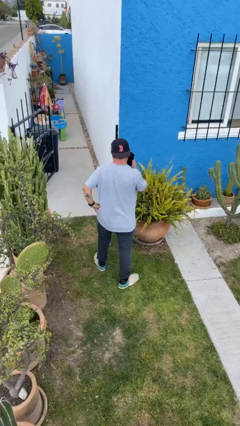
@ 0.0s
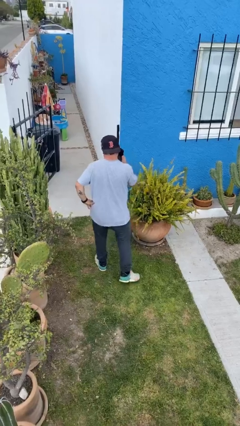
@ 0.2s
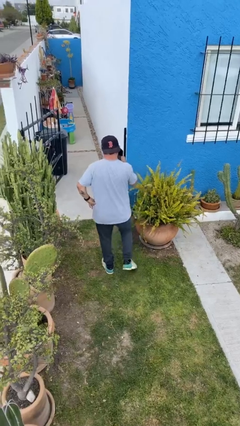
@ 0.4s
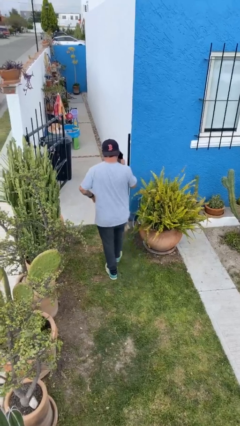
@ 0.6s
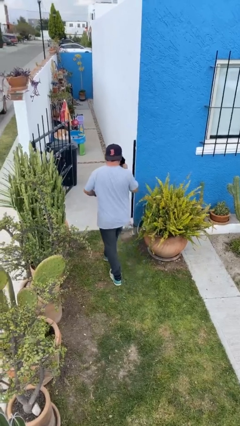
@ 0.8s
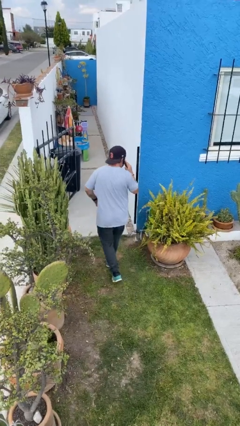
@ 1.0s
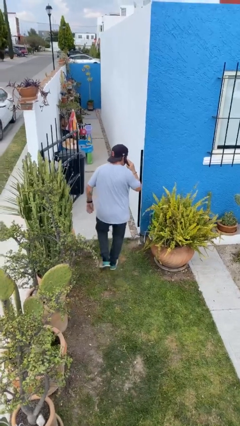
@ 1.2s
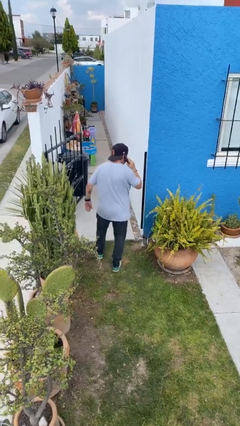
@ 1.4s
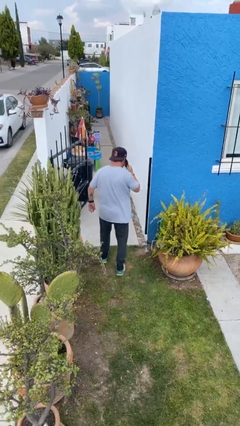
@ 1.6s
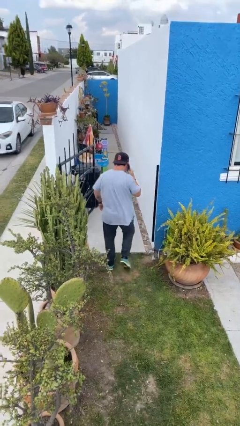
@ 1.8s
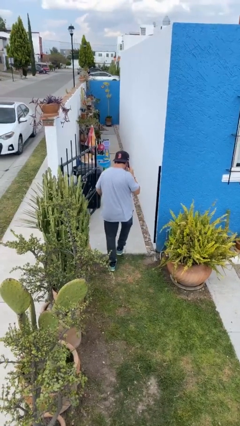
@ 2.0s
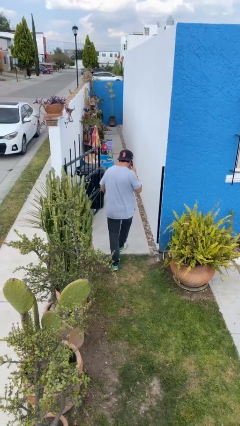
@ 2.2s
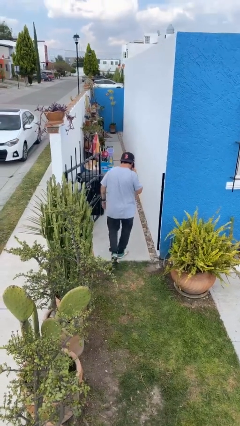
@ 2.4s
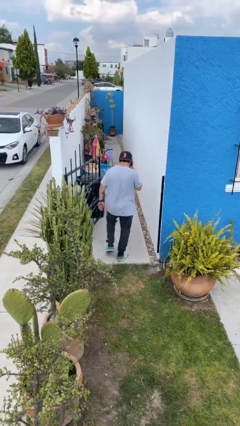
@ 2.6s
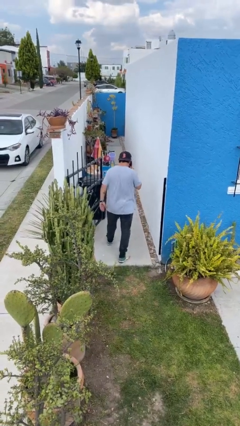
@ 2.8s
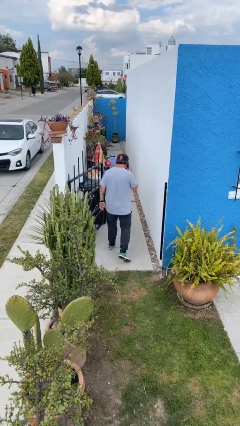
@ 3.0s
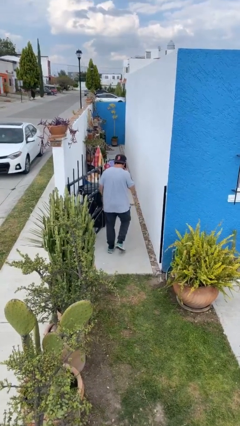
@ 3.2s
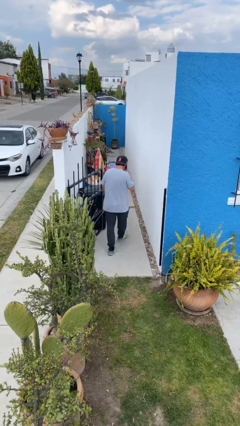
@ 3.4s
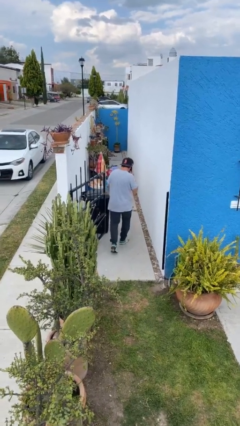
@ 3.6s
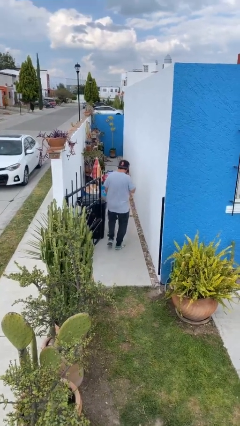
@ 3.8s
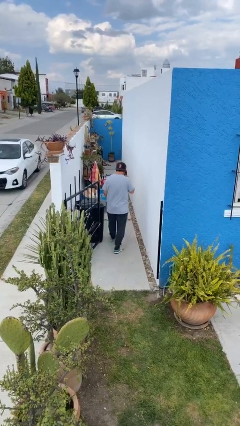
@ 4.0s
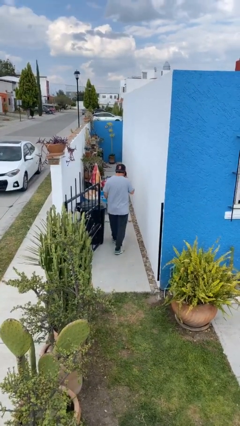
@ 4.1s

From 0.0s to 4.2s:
person exits scene through structure

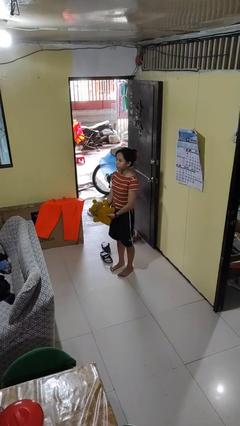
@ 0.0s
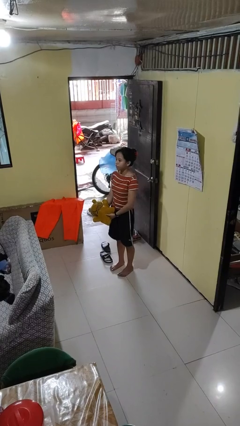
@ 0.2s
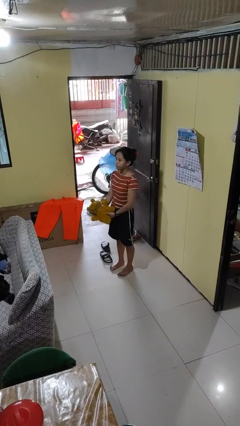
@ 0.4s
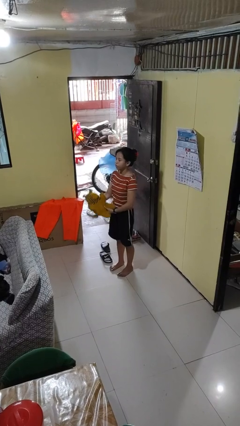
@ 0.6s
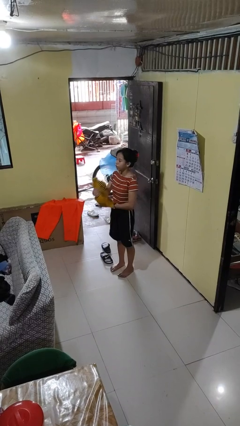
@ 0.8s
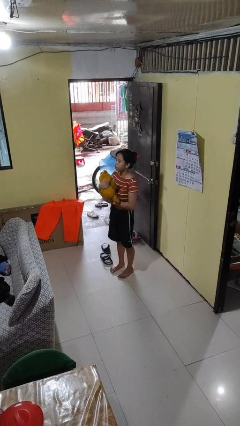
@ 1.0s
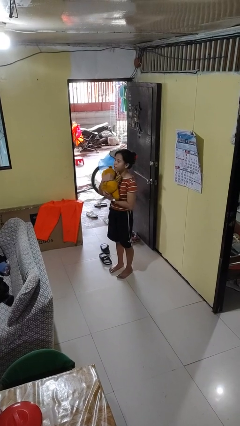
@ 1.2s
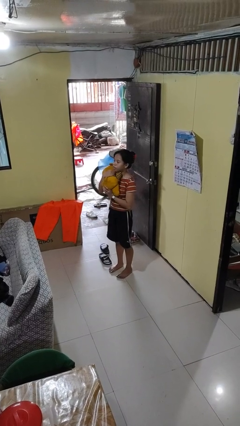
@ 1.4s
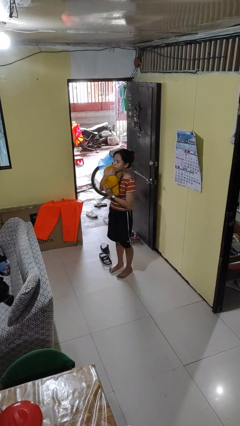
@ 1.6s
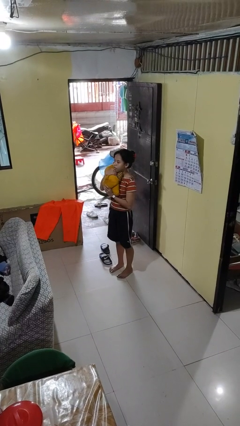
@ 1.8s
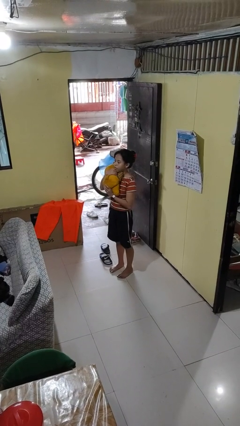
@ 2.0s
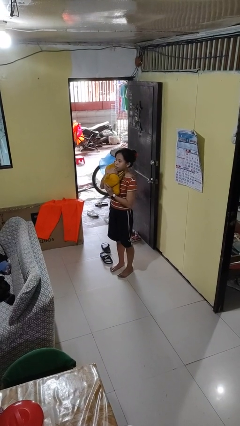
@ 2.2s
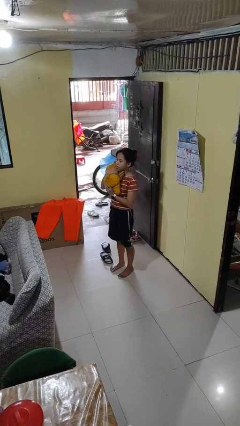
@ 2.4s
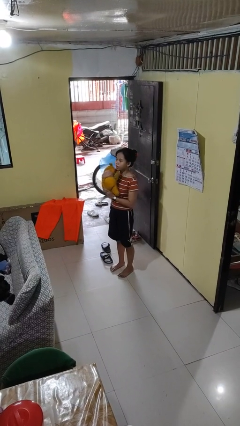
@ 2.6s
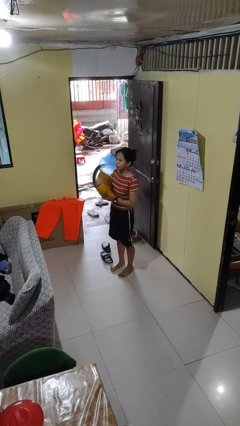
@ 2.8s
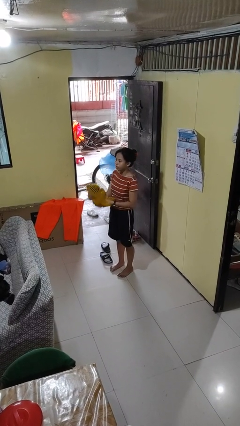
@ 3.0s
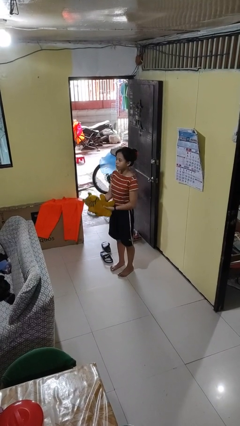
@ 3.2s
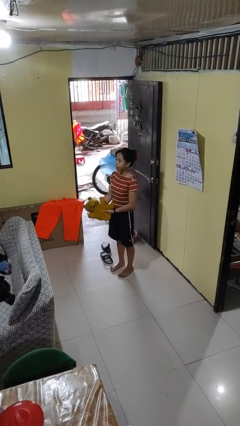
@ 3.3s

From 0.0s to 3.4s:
person hugs stuffed animal

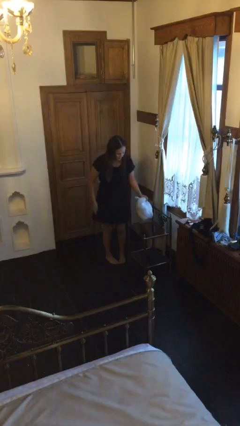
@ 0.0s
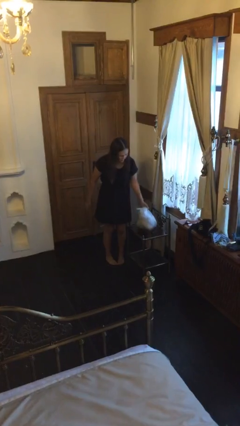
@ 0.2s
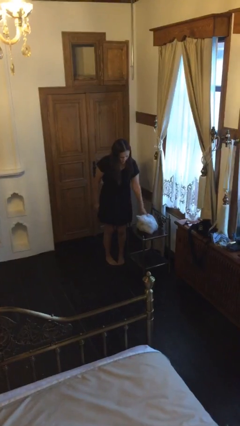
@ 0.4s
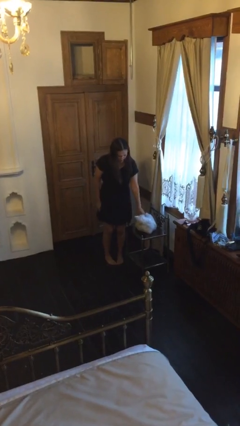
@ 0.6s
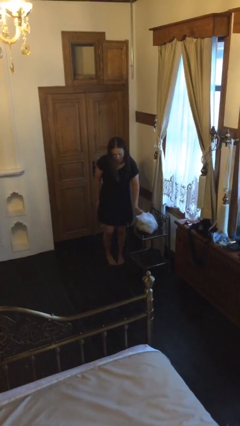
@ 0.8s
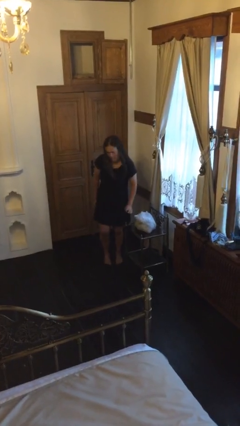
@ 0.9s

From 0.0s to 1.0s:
person puts down object on table

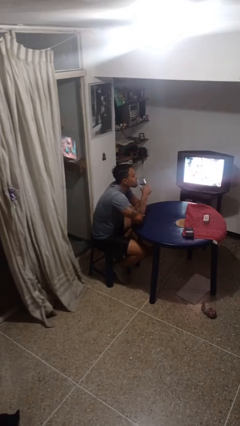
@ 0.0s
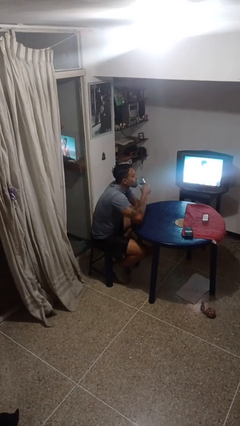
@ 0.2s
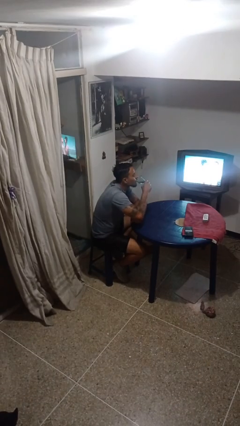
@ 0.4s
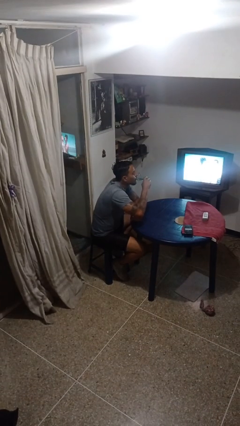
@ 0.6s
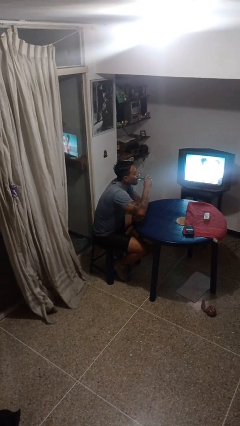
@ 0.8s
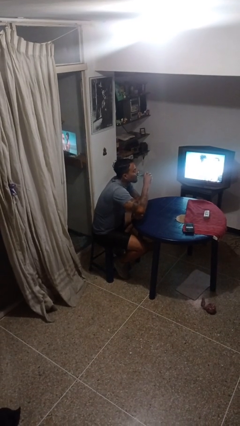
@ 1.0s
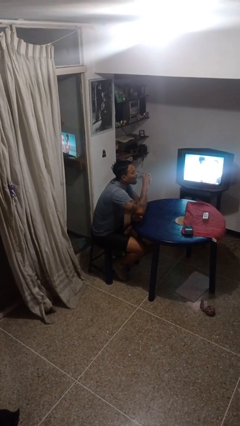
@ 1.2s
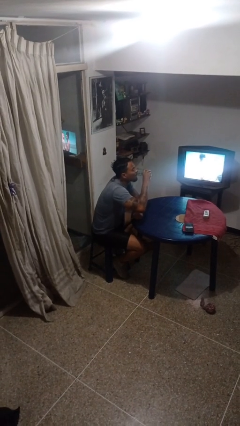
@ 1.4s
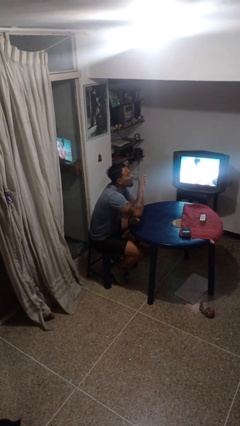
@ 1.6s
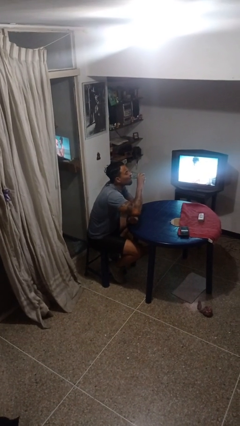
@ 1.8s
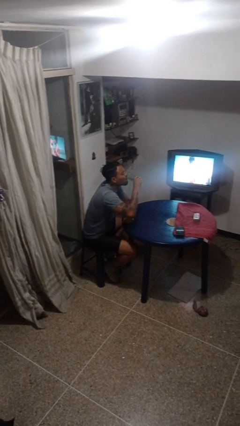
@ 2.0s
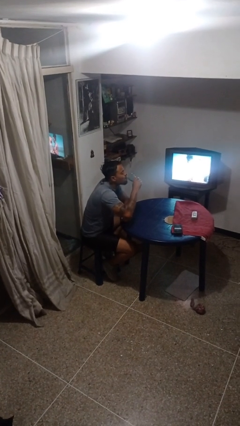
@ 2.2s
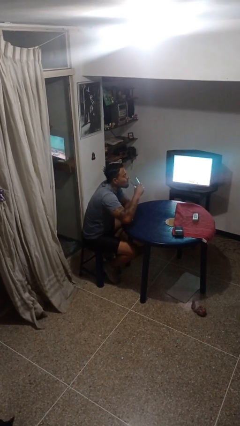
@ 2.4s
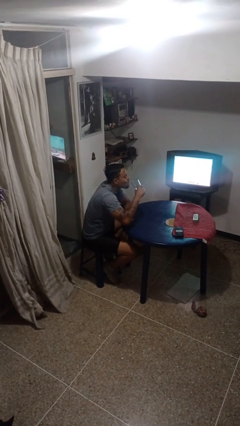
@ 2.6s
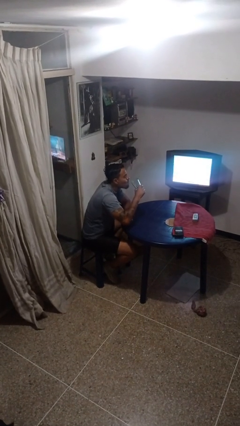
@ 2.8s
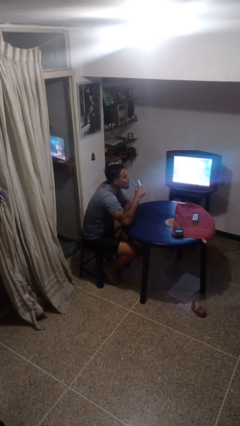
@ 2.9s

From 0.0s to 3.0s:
person drinks from mug

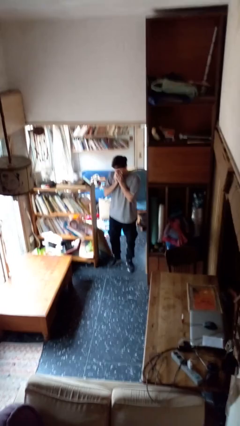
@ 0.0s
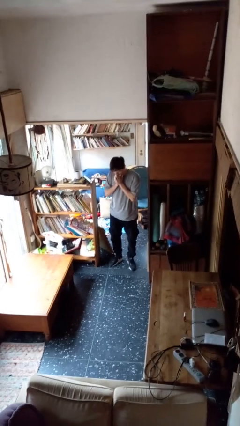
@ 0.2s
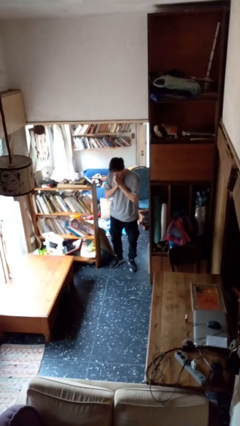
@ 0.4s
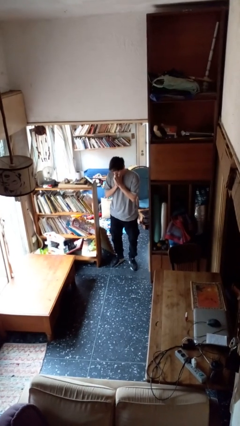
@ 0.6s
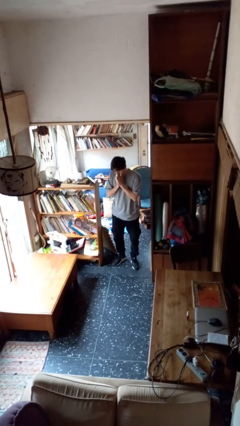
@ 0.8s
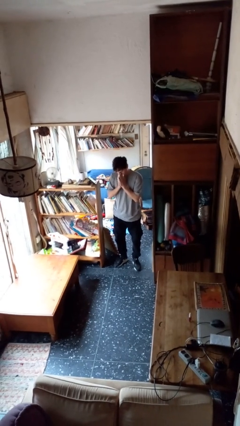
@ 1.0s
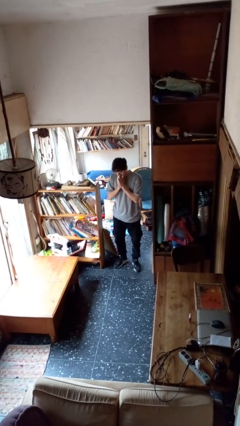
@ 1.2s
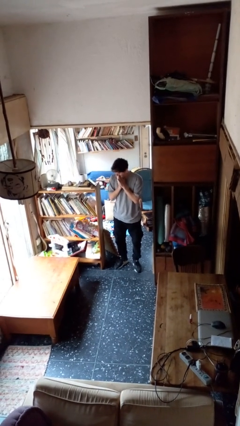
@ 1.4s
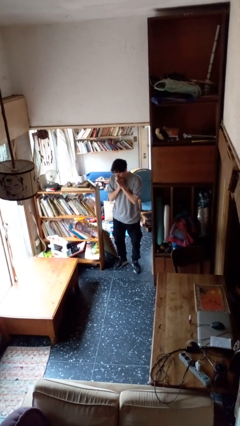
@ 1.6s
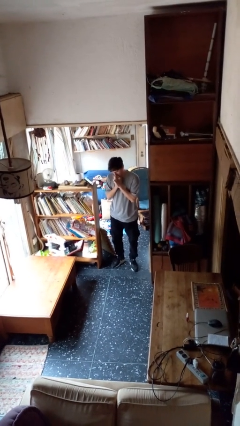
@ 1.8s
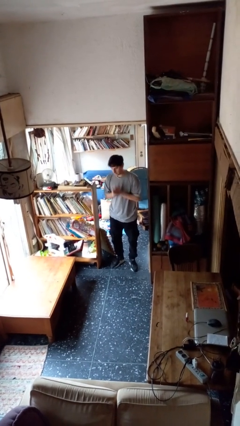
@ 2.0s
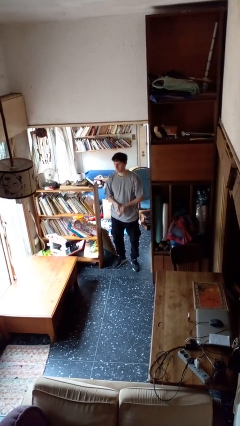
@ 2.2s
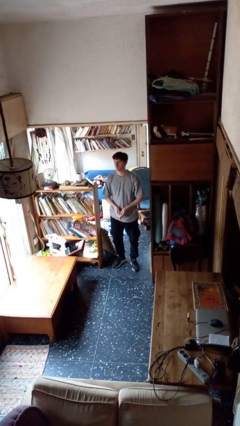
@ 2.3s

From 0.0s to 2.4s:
person blows nose

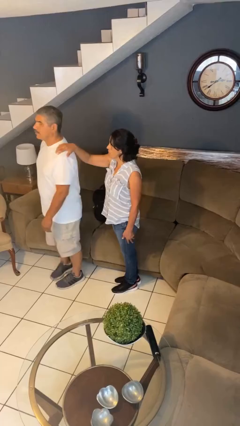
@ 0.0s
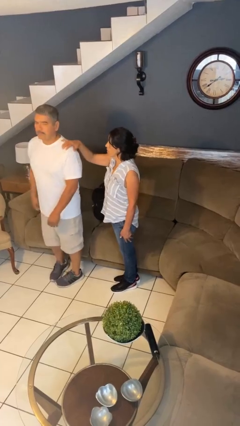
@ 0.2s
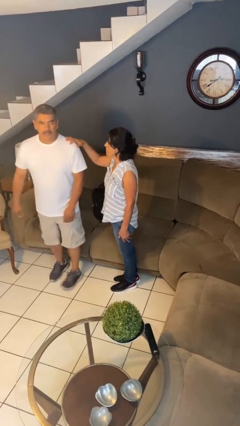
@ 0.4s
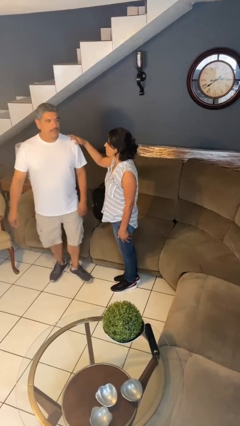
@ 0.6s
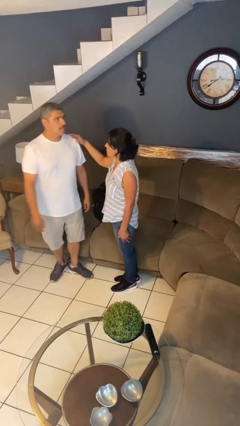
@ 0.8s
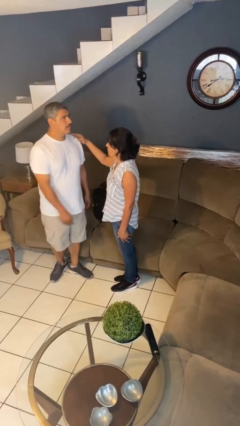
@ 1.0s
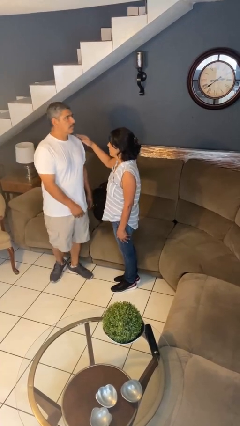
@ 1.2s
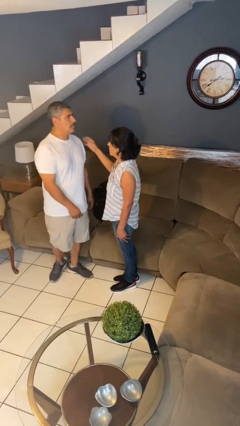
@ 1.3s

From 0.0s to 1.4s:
person spins person around

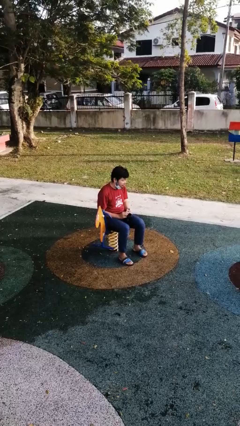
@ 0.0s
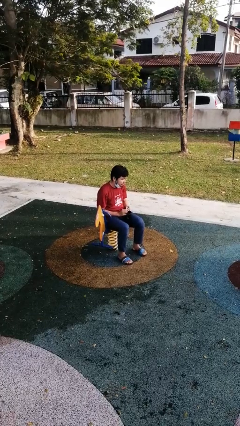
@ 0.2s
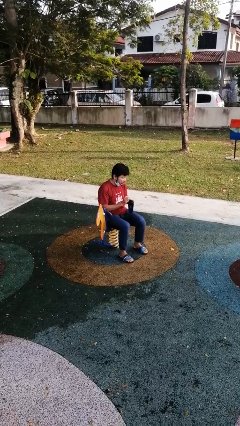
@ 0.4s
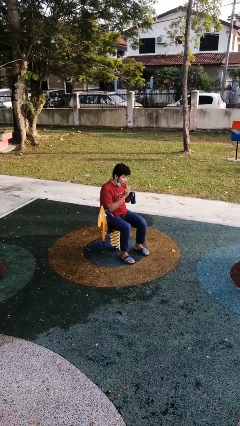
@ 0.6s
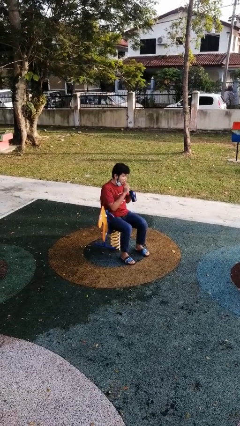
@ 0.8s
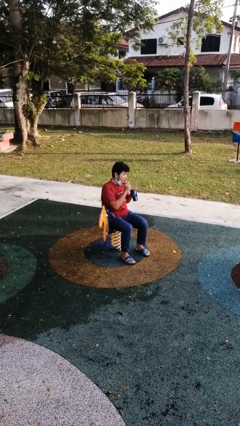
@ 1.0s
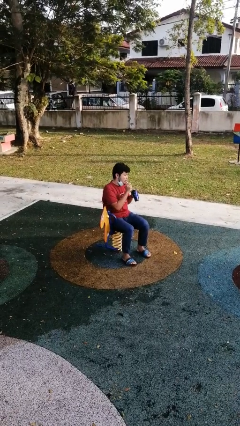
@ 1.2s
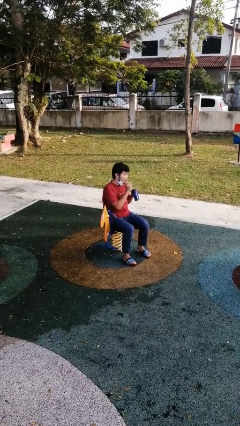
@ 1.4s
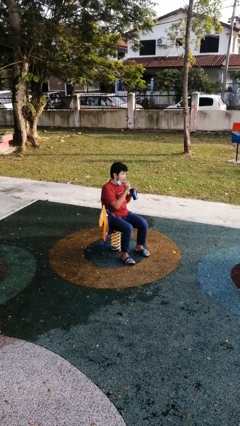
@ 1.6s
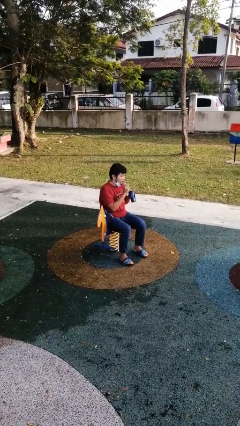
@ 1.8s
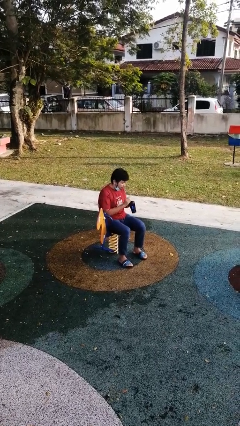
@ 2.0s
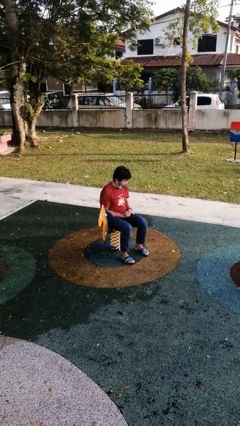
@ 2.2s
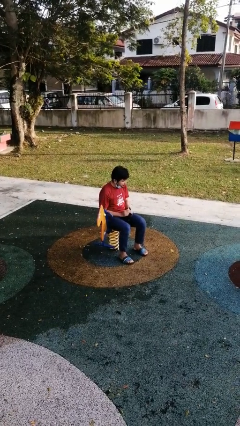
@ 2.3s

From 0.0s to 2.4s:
person drinks from straw
